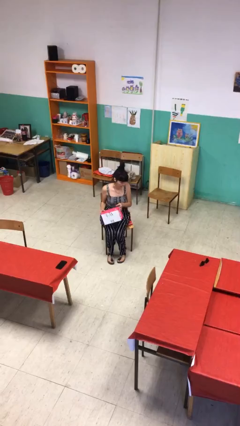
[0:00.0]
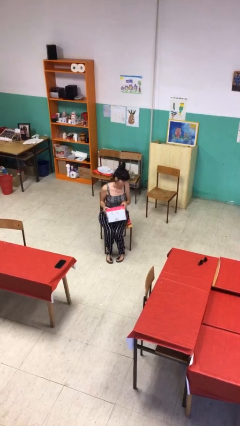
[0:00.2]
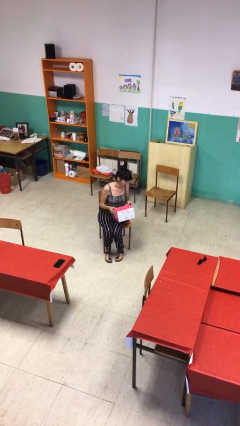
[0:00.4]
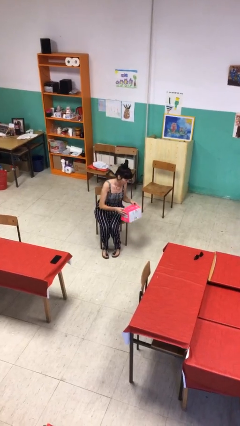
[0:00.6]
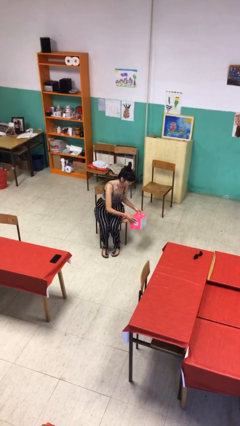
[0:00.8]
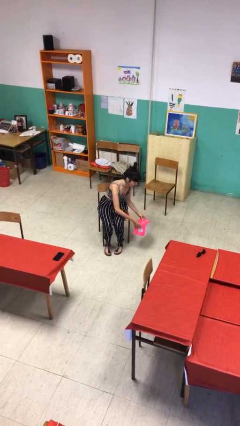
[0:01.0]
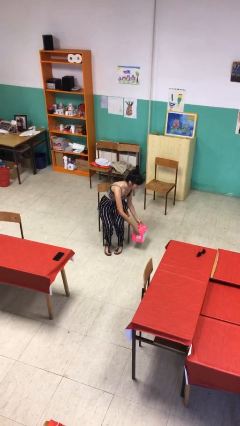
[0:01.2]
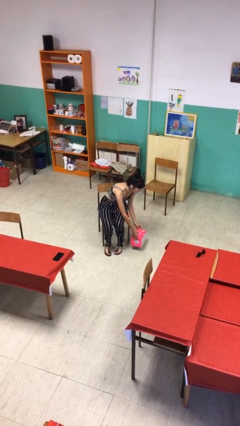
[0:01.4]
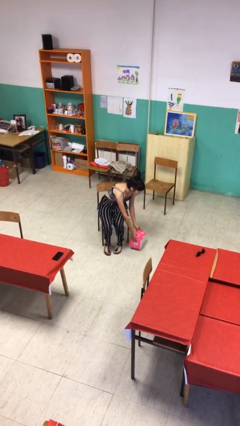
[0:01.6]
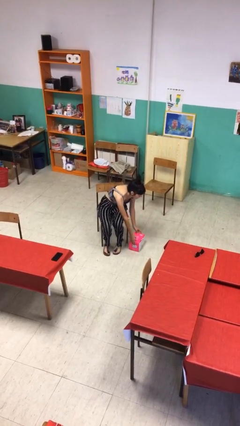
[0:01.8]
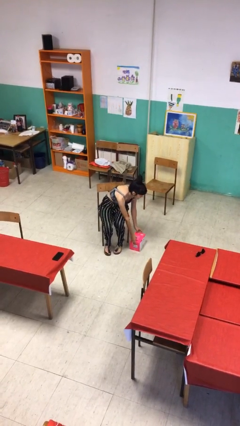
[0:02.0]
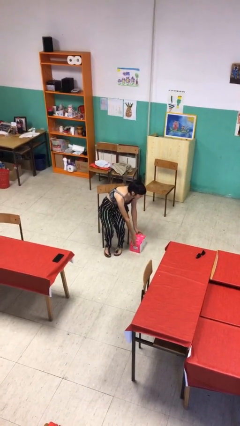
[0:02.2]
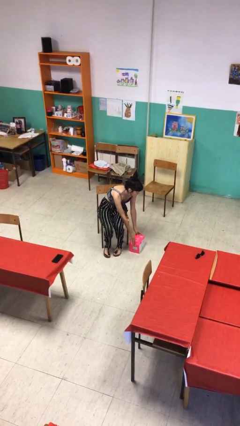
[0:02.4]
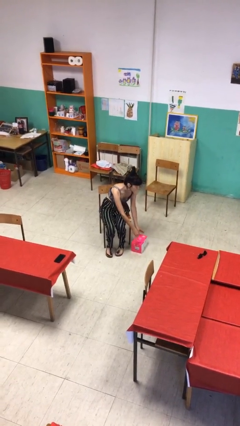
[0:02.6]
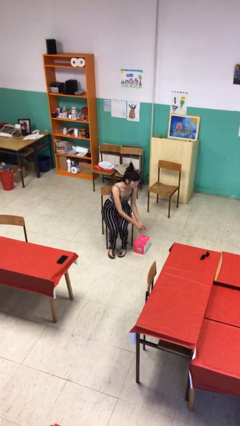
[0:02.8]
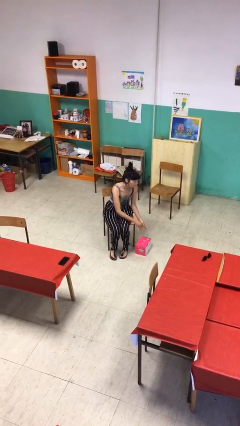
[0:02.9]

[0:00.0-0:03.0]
person puts down object on floor

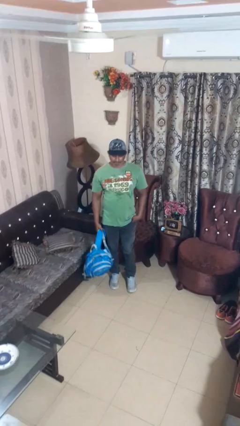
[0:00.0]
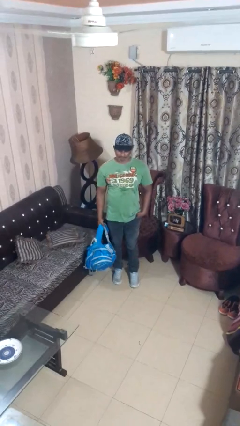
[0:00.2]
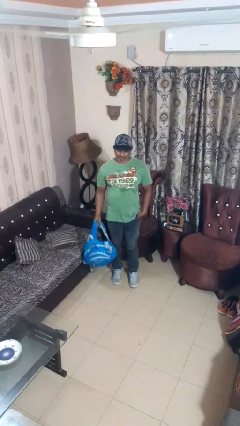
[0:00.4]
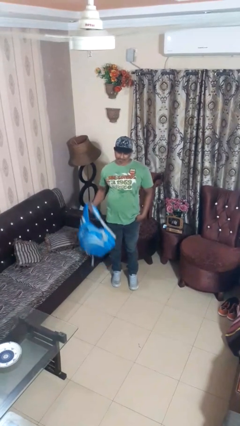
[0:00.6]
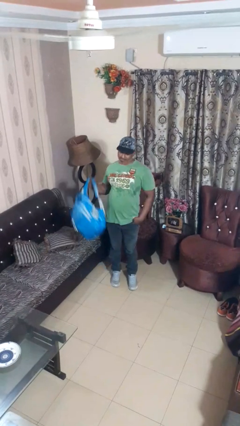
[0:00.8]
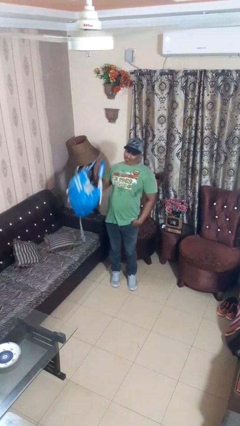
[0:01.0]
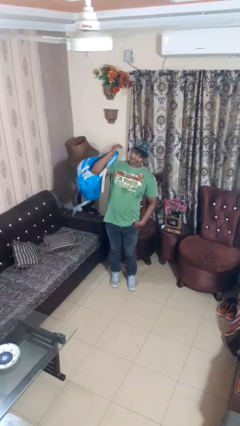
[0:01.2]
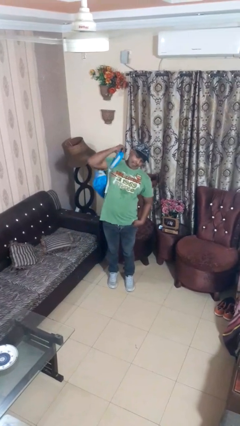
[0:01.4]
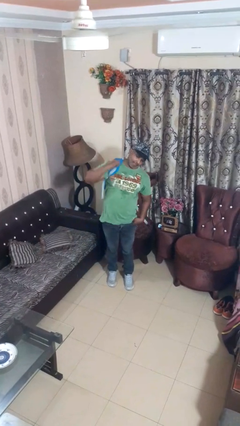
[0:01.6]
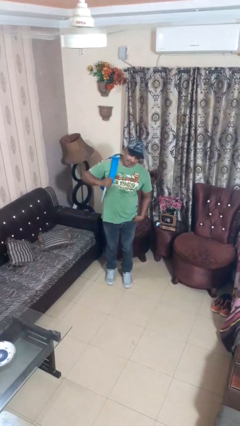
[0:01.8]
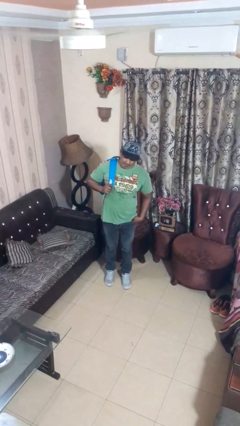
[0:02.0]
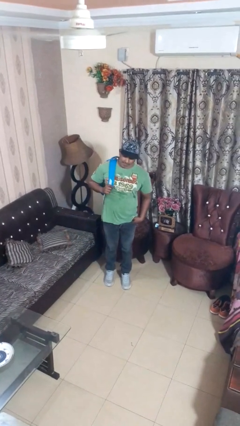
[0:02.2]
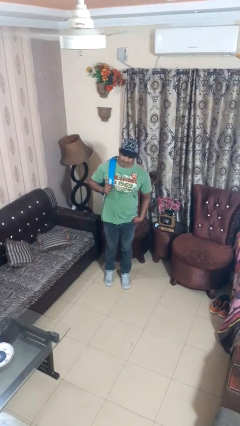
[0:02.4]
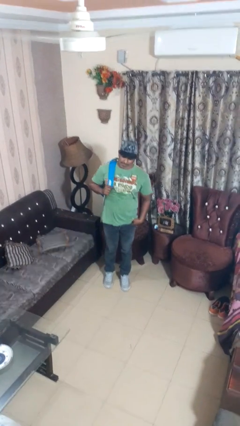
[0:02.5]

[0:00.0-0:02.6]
person puts on backpack

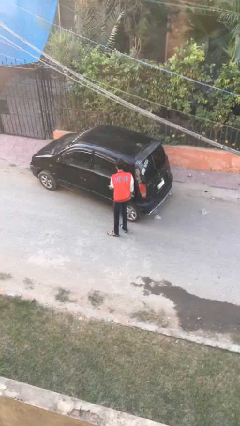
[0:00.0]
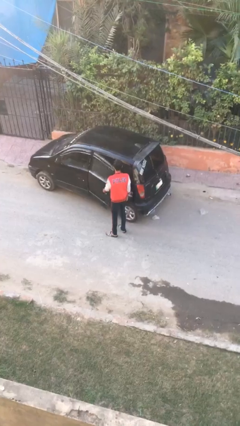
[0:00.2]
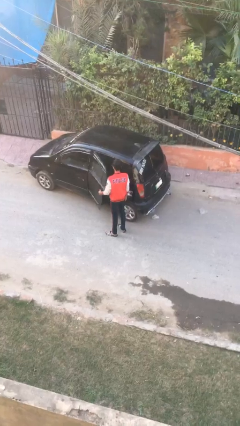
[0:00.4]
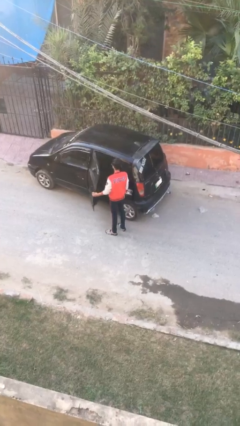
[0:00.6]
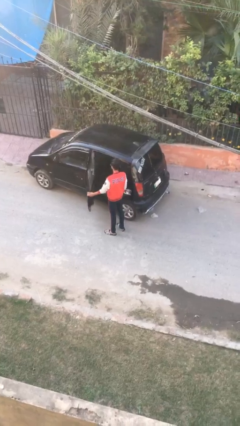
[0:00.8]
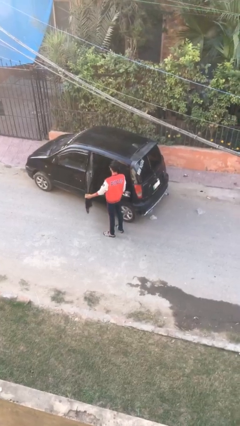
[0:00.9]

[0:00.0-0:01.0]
person opens car door

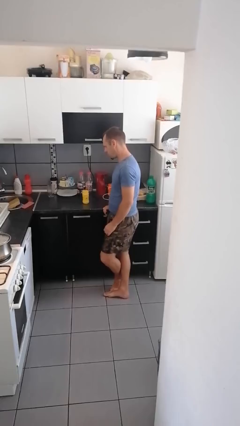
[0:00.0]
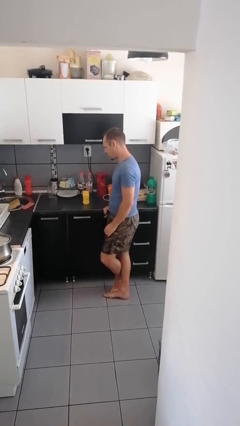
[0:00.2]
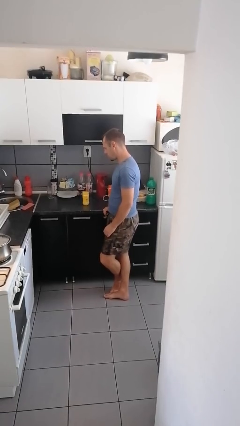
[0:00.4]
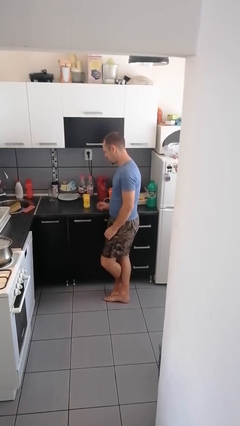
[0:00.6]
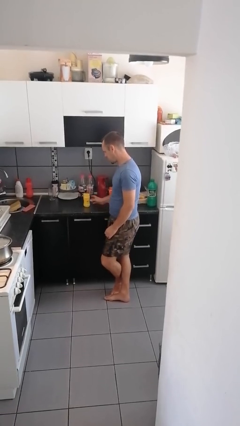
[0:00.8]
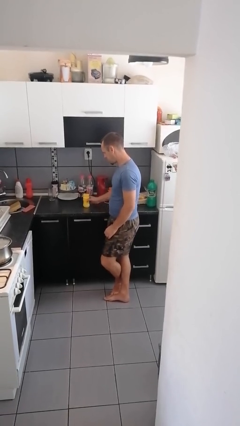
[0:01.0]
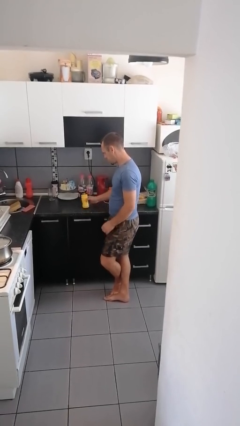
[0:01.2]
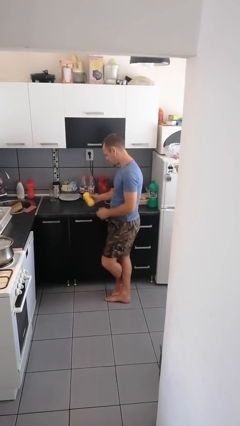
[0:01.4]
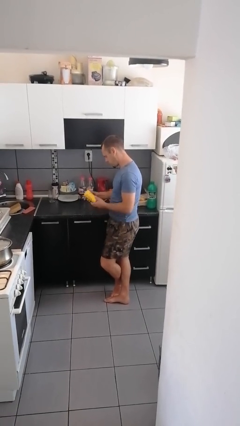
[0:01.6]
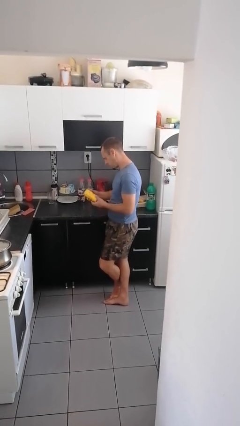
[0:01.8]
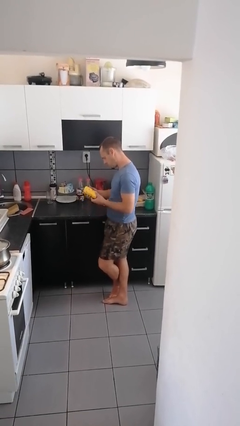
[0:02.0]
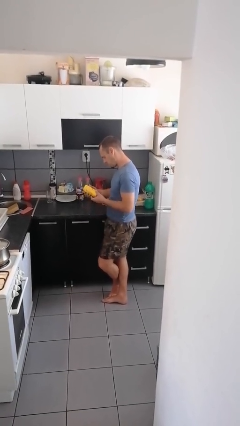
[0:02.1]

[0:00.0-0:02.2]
person picks up object from countertop

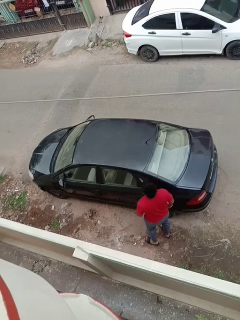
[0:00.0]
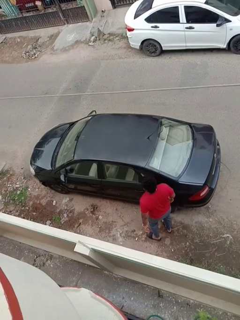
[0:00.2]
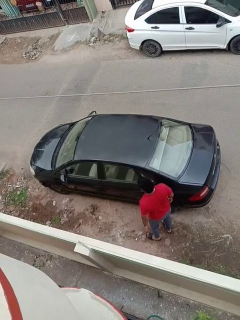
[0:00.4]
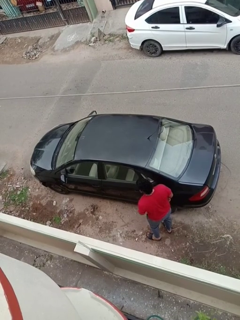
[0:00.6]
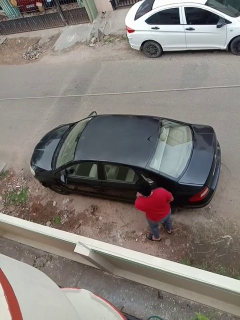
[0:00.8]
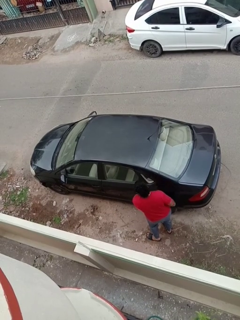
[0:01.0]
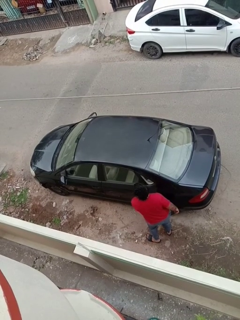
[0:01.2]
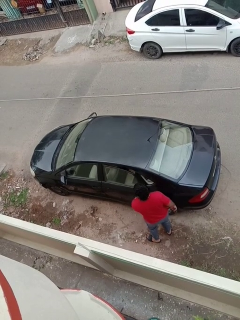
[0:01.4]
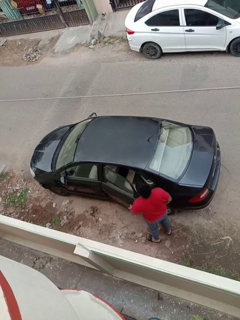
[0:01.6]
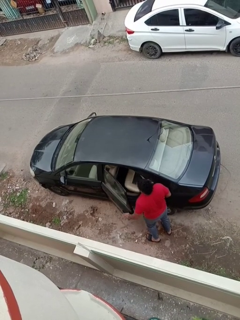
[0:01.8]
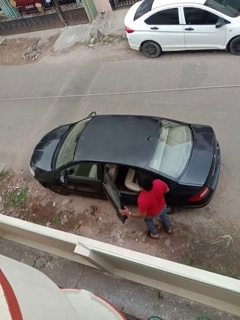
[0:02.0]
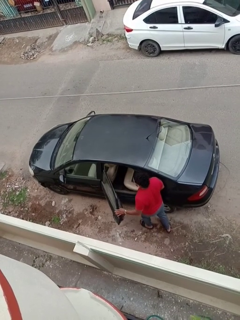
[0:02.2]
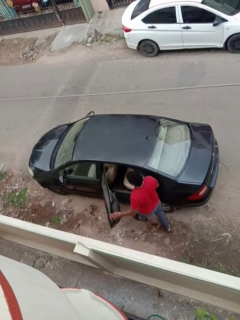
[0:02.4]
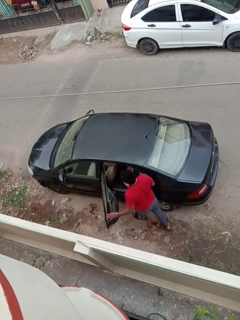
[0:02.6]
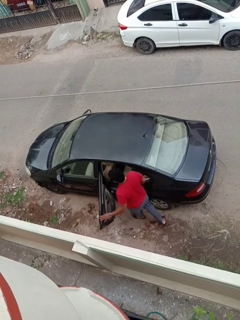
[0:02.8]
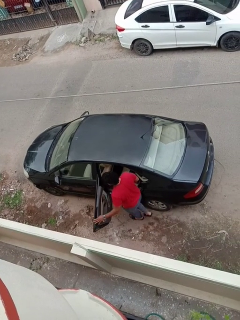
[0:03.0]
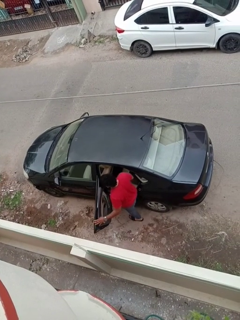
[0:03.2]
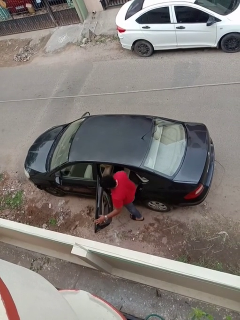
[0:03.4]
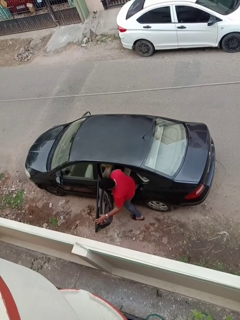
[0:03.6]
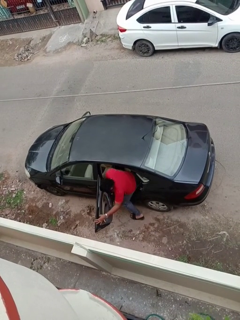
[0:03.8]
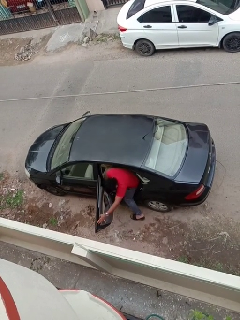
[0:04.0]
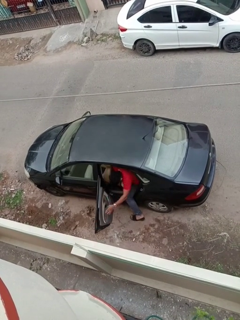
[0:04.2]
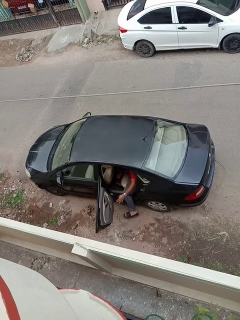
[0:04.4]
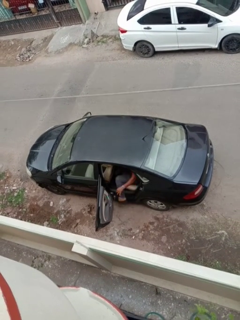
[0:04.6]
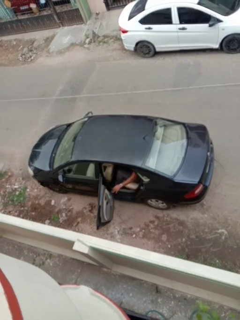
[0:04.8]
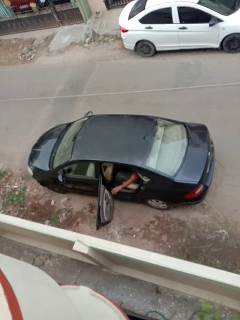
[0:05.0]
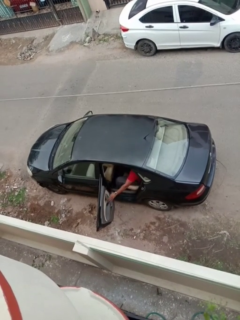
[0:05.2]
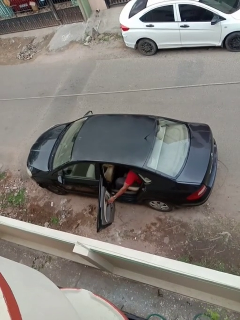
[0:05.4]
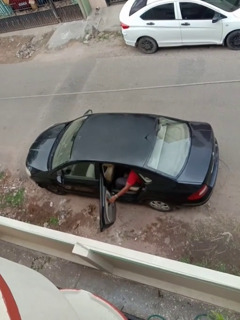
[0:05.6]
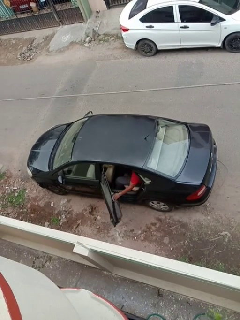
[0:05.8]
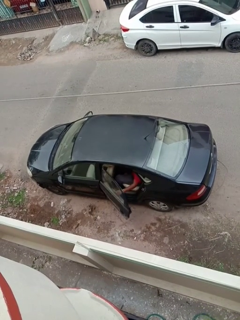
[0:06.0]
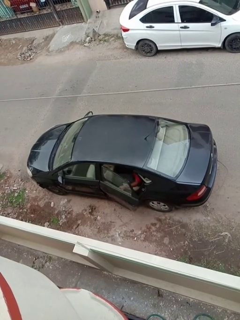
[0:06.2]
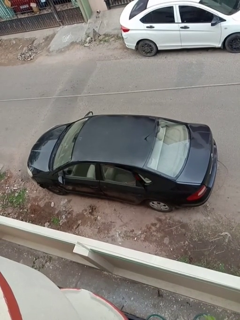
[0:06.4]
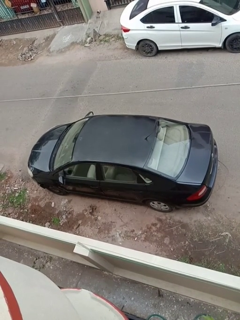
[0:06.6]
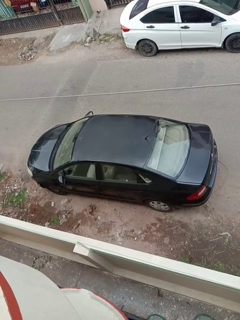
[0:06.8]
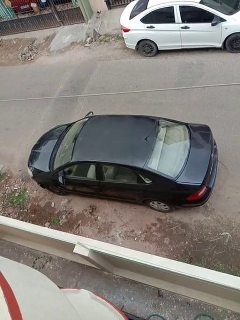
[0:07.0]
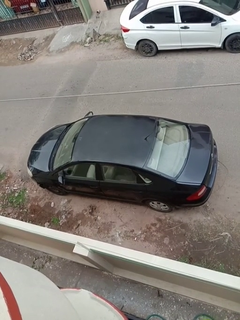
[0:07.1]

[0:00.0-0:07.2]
car picks up person

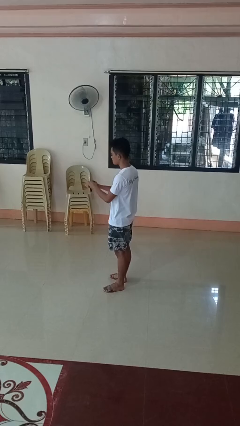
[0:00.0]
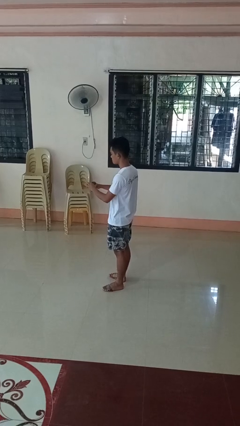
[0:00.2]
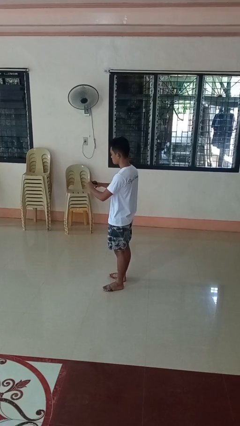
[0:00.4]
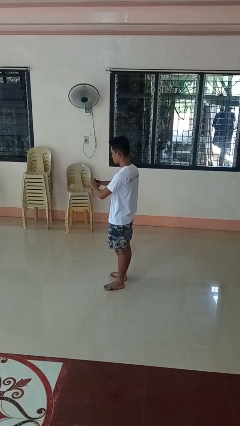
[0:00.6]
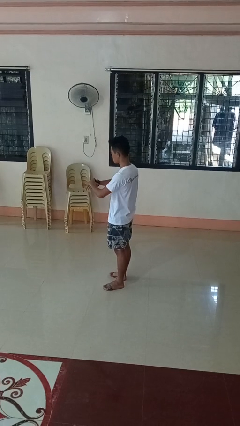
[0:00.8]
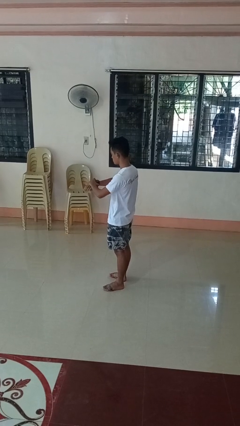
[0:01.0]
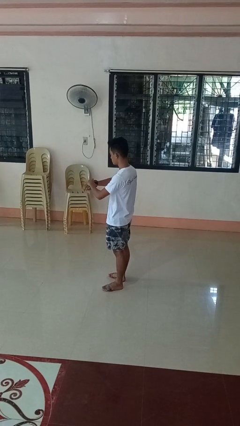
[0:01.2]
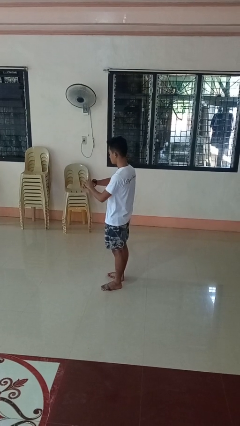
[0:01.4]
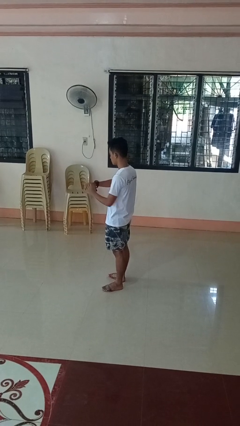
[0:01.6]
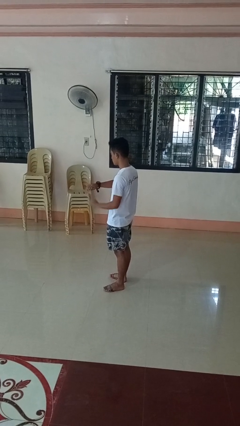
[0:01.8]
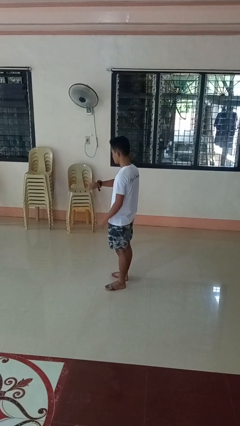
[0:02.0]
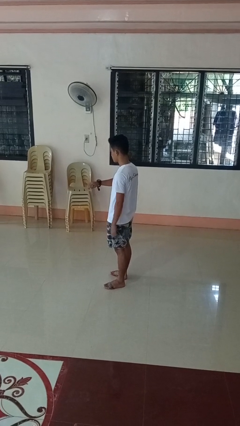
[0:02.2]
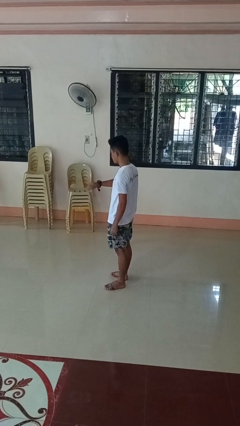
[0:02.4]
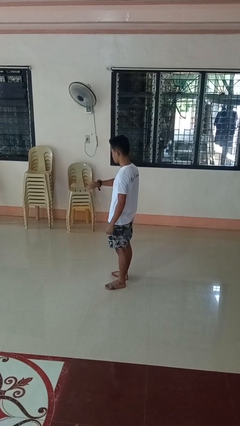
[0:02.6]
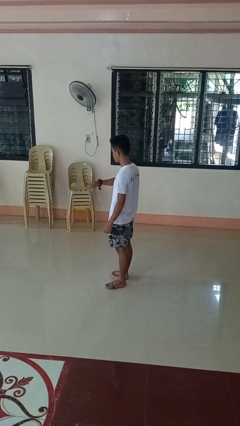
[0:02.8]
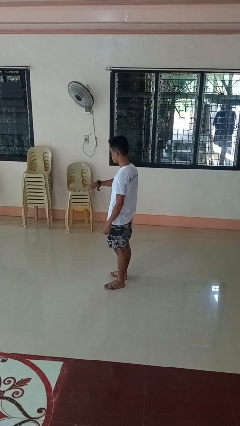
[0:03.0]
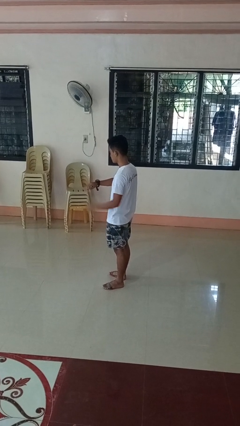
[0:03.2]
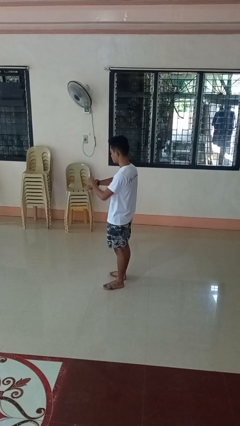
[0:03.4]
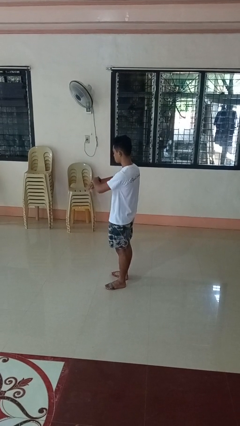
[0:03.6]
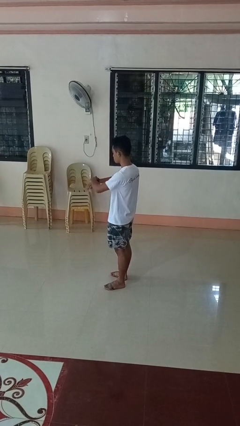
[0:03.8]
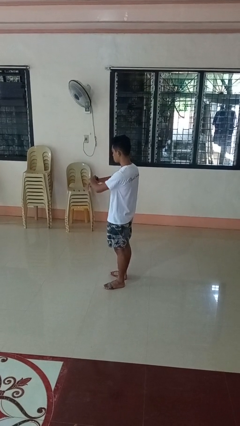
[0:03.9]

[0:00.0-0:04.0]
person puts on wristwatch
